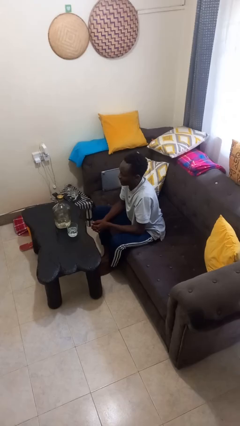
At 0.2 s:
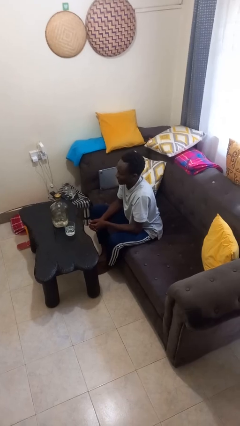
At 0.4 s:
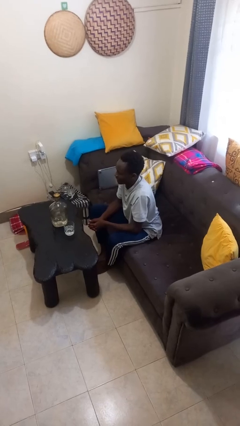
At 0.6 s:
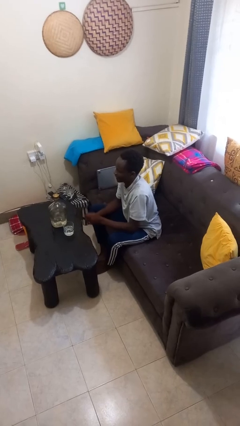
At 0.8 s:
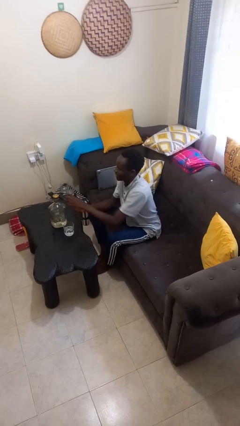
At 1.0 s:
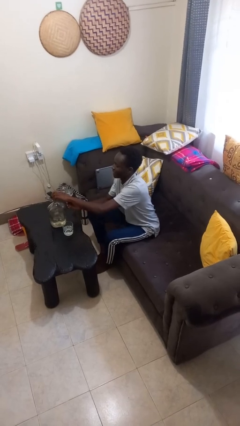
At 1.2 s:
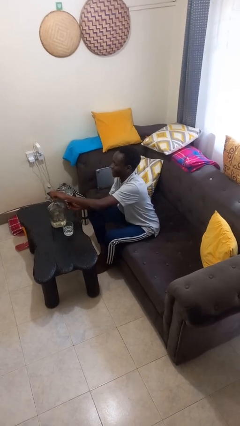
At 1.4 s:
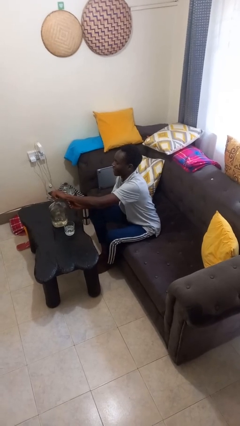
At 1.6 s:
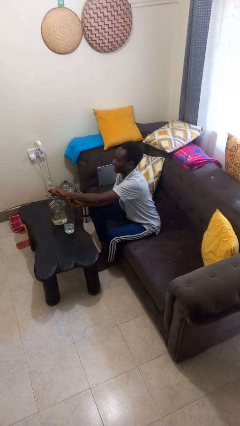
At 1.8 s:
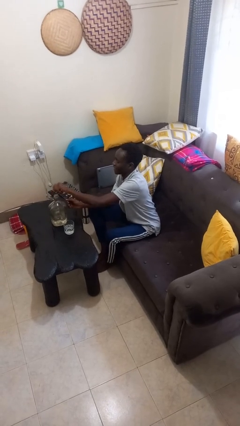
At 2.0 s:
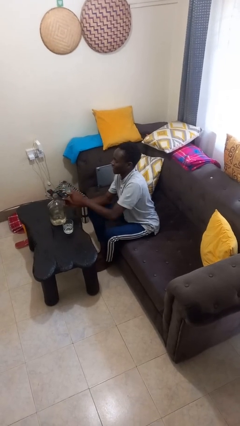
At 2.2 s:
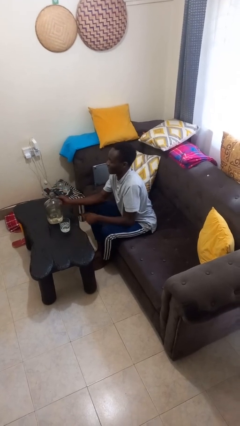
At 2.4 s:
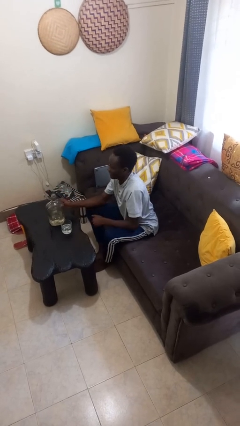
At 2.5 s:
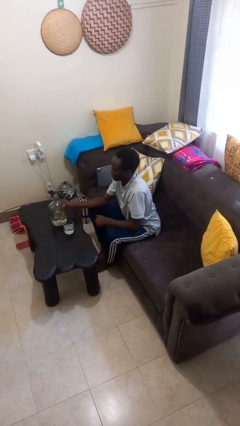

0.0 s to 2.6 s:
person unscrews lid from bottle

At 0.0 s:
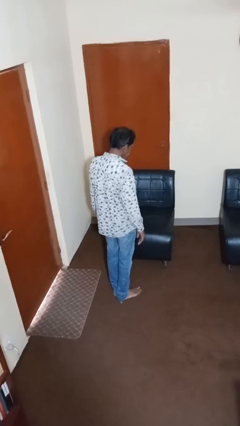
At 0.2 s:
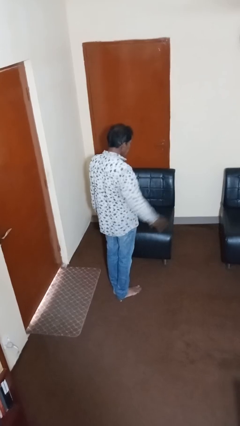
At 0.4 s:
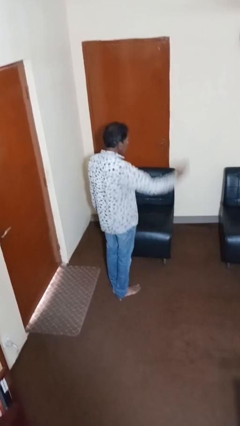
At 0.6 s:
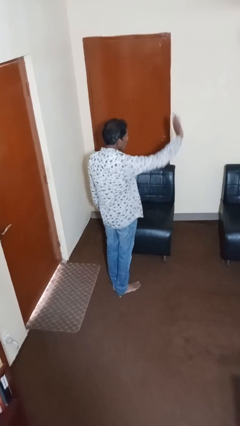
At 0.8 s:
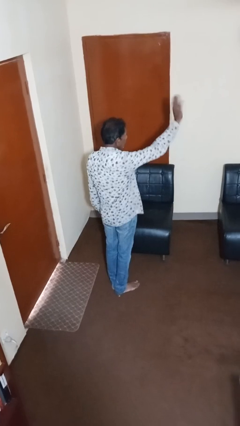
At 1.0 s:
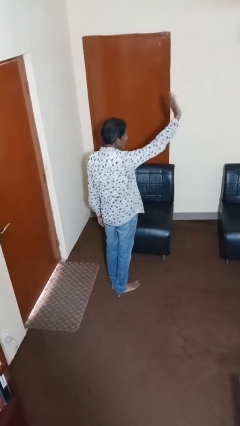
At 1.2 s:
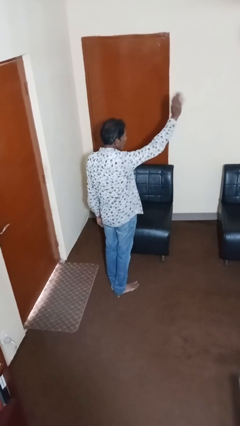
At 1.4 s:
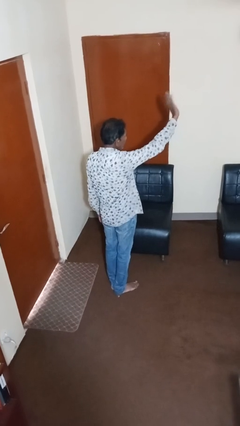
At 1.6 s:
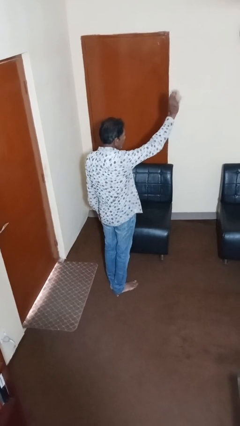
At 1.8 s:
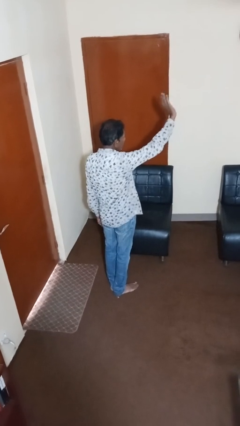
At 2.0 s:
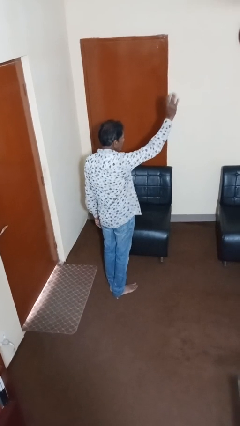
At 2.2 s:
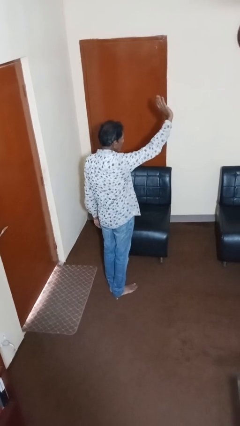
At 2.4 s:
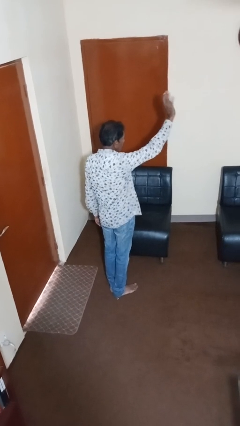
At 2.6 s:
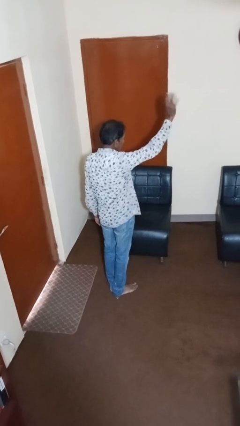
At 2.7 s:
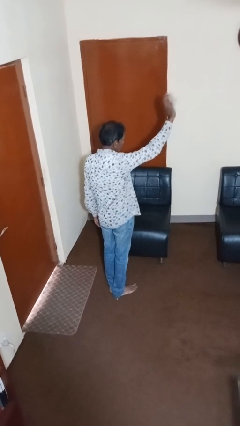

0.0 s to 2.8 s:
person waves hand over object

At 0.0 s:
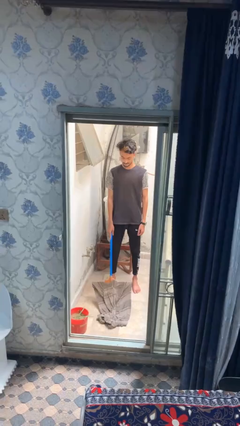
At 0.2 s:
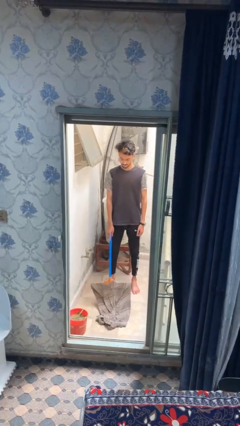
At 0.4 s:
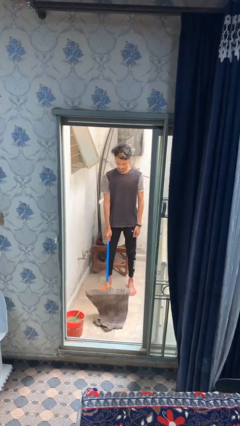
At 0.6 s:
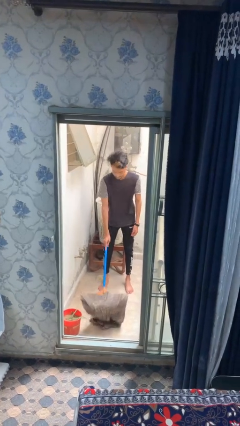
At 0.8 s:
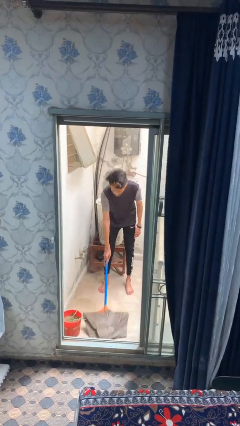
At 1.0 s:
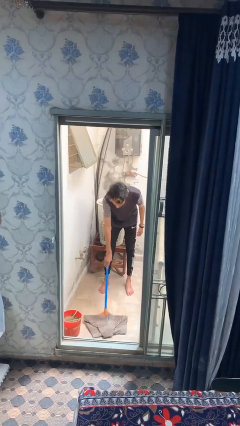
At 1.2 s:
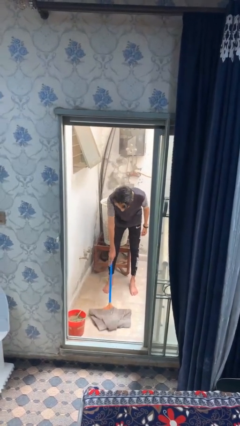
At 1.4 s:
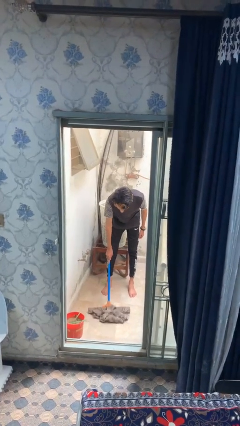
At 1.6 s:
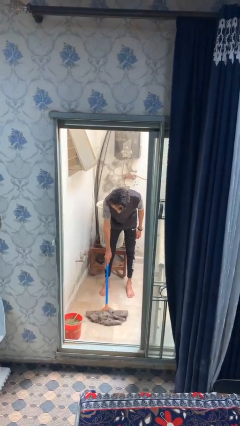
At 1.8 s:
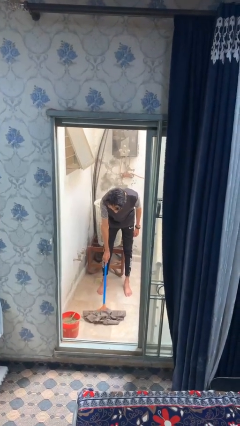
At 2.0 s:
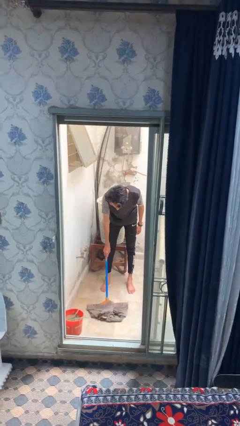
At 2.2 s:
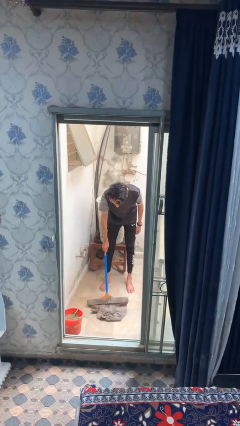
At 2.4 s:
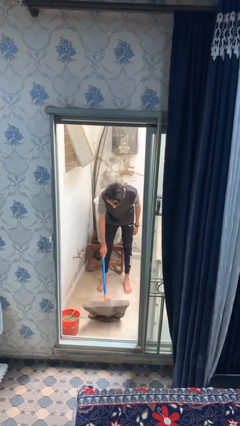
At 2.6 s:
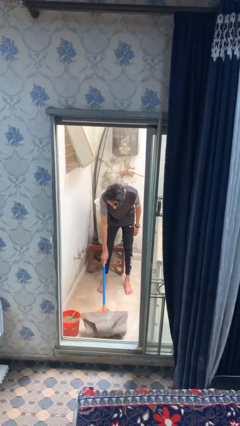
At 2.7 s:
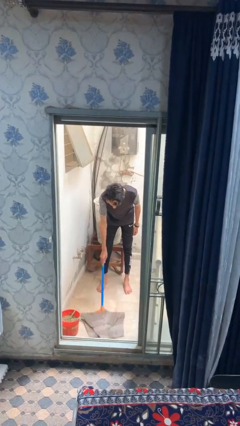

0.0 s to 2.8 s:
person mops

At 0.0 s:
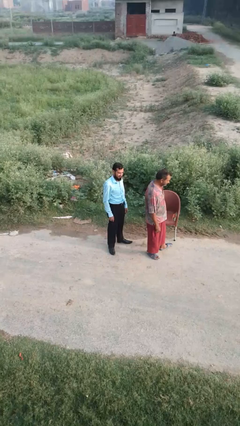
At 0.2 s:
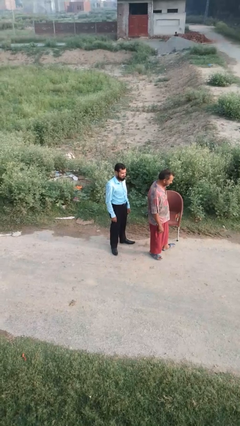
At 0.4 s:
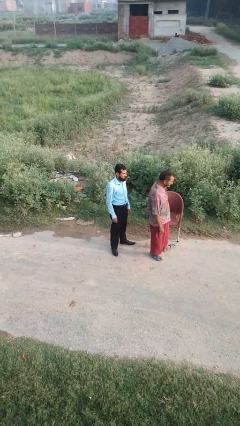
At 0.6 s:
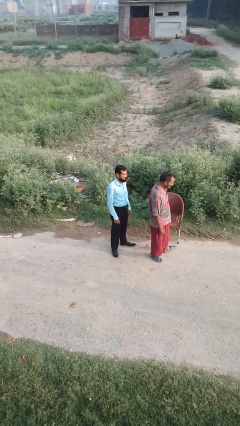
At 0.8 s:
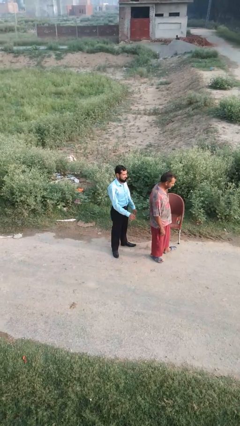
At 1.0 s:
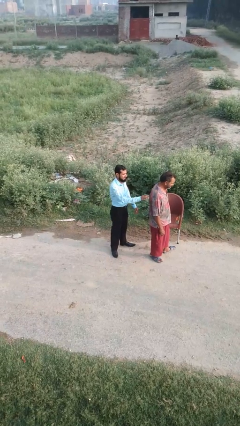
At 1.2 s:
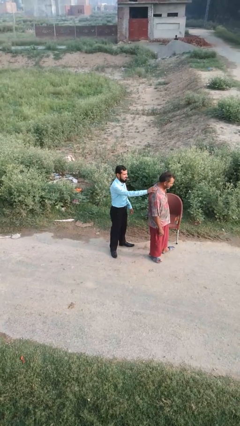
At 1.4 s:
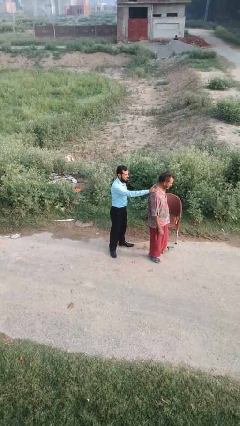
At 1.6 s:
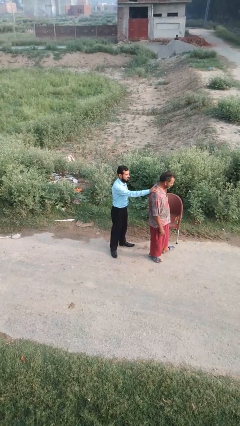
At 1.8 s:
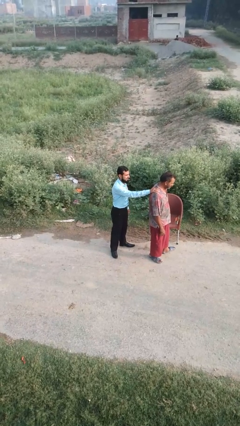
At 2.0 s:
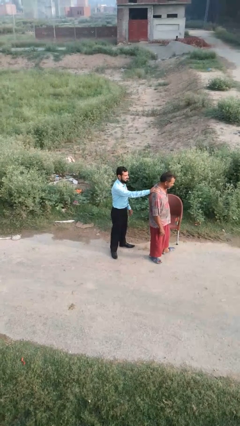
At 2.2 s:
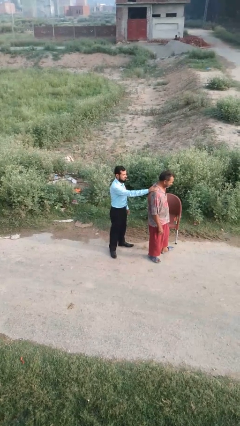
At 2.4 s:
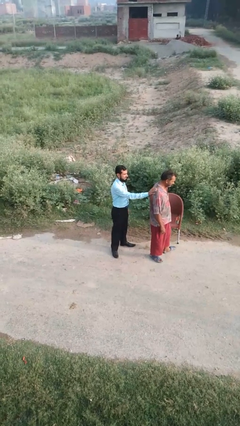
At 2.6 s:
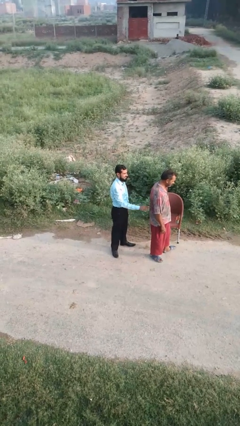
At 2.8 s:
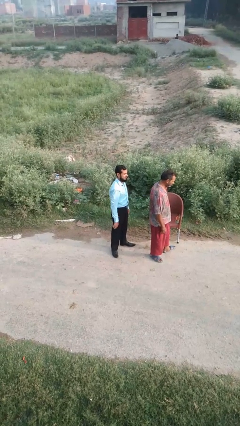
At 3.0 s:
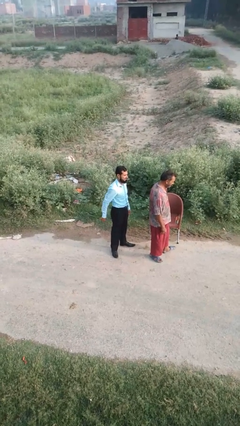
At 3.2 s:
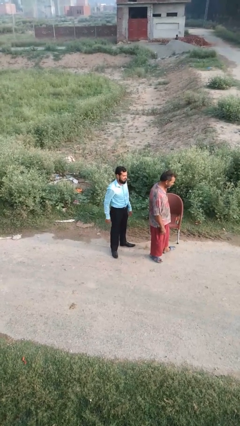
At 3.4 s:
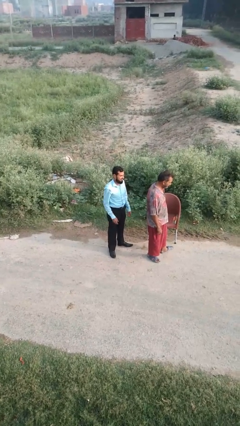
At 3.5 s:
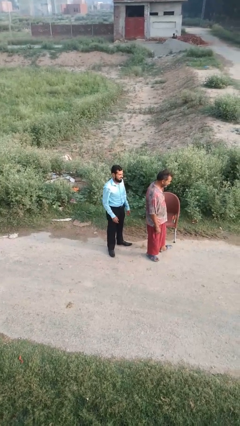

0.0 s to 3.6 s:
person touches back of person

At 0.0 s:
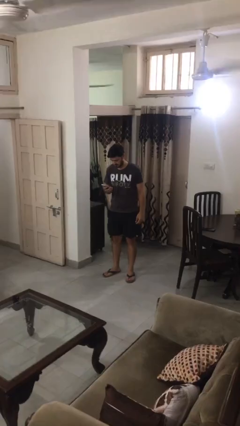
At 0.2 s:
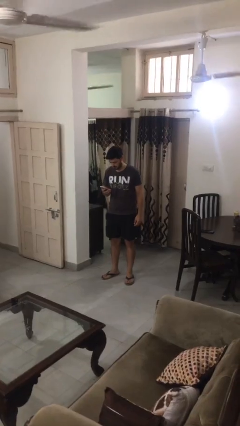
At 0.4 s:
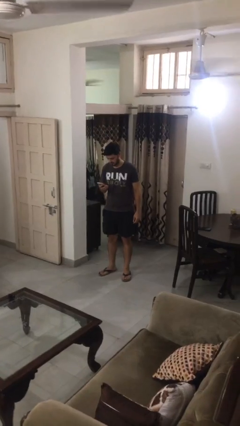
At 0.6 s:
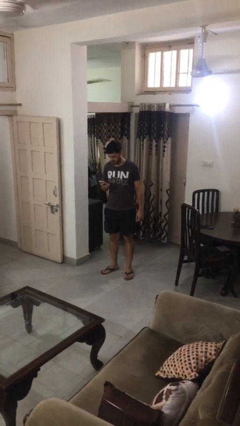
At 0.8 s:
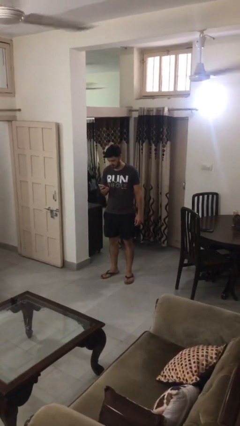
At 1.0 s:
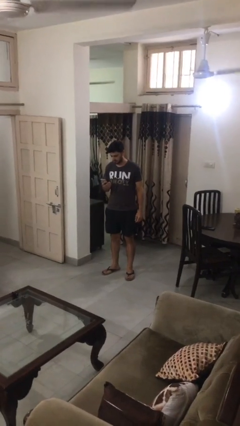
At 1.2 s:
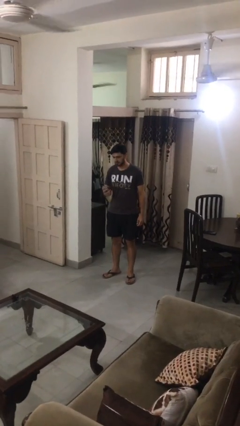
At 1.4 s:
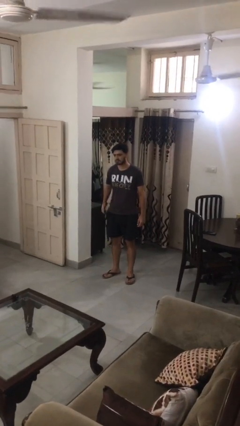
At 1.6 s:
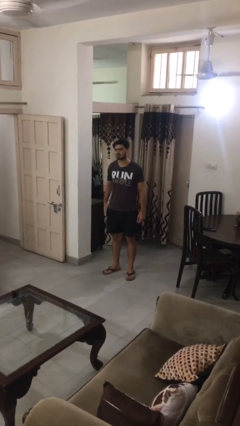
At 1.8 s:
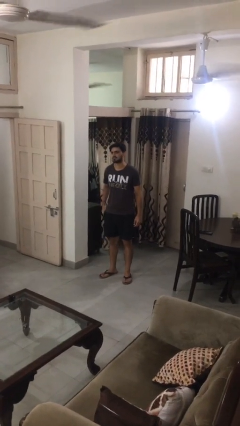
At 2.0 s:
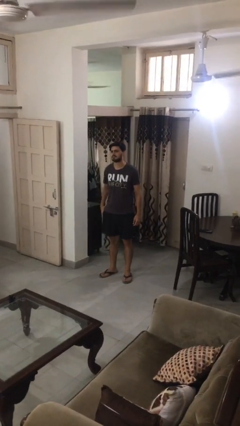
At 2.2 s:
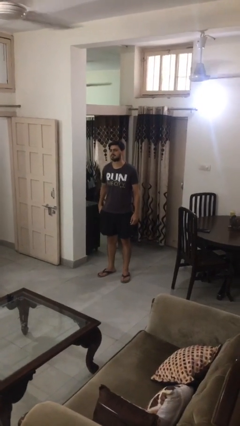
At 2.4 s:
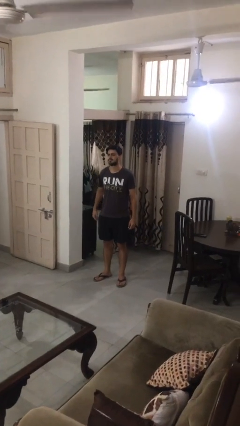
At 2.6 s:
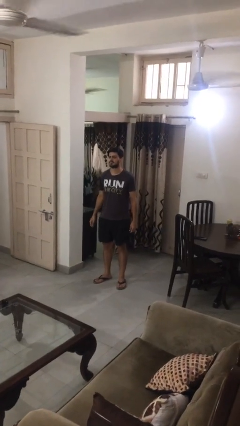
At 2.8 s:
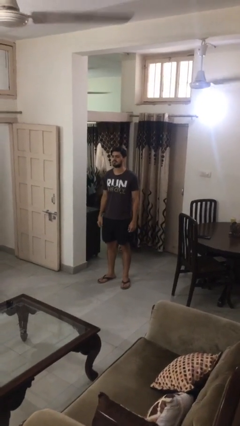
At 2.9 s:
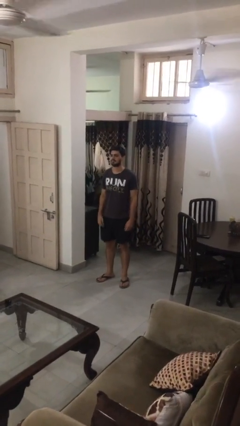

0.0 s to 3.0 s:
person puts phone into pocket

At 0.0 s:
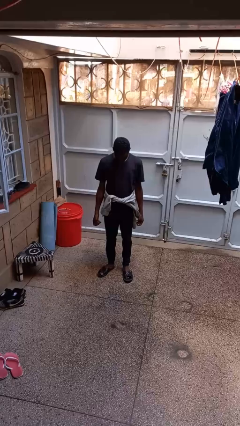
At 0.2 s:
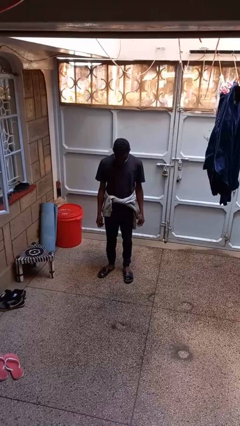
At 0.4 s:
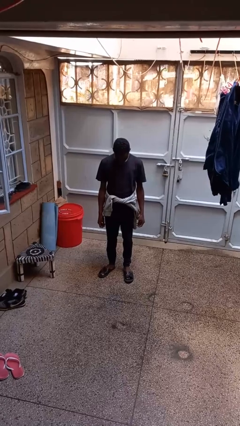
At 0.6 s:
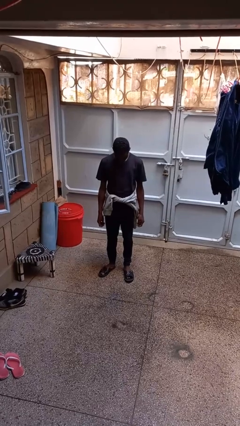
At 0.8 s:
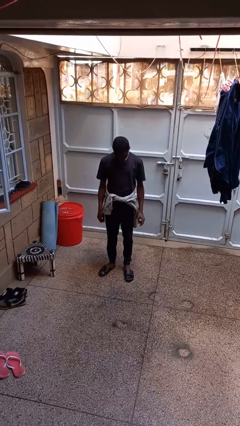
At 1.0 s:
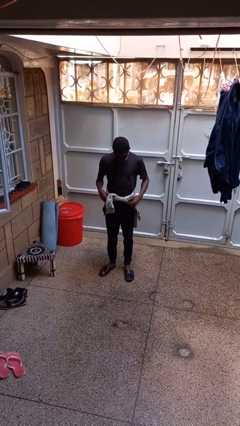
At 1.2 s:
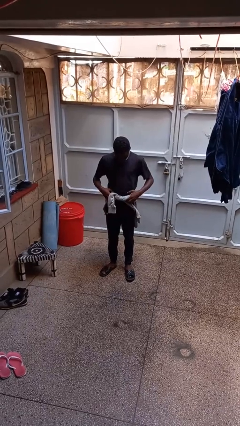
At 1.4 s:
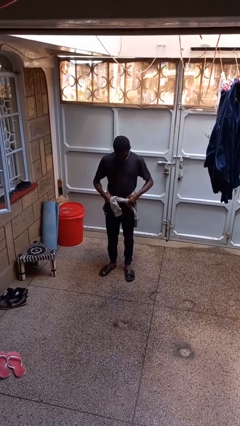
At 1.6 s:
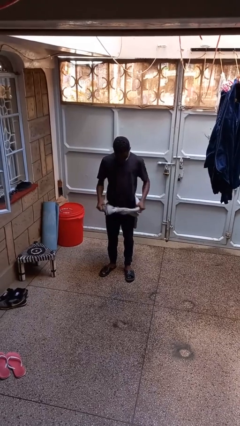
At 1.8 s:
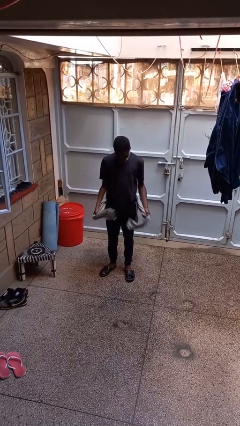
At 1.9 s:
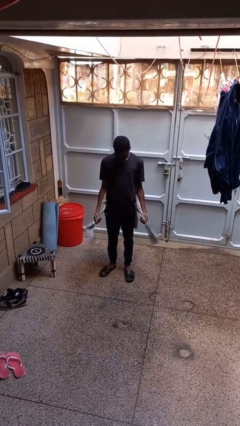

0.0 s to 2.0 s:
person unties jacket around waist

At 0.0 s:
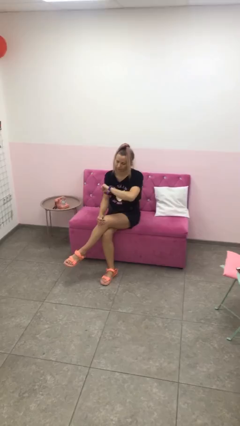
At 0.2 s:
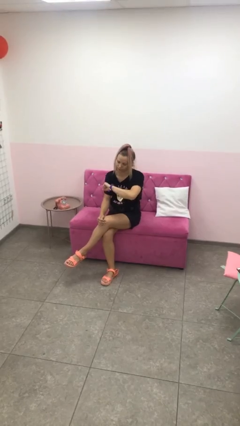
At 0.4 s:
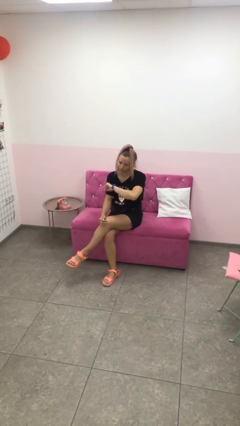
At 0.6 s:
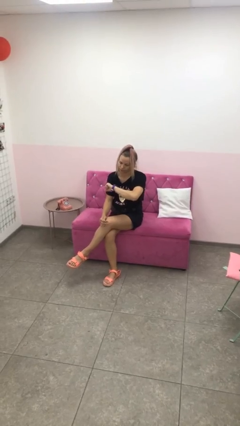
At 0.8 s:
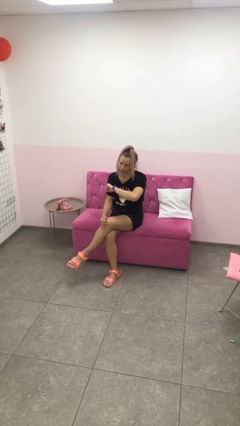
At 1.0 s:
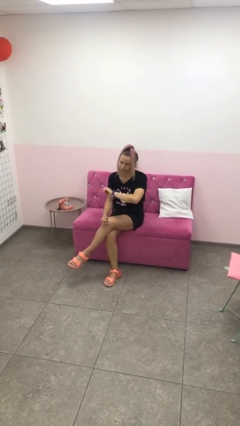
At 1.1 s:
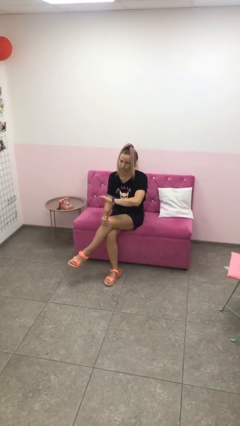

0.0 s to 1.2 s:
person looks at wristwatch
